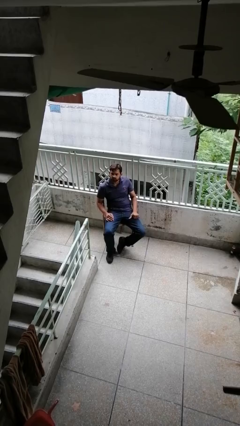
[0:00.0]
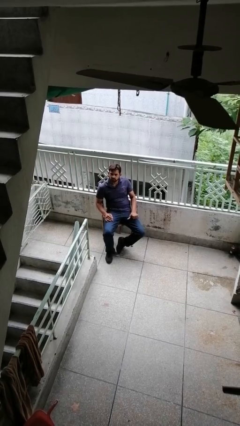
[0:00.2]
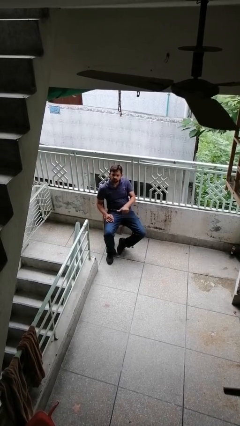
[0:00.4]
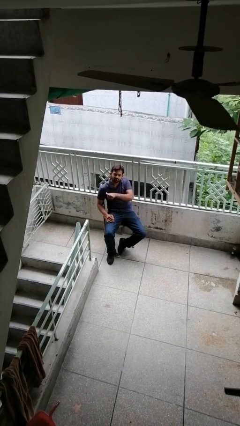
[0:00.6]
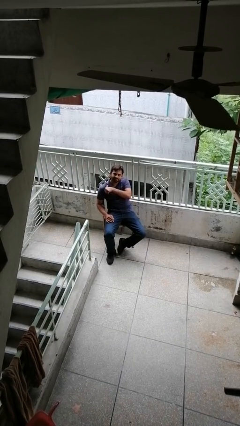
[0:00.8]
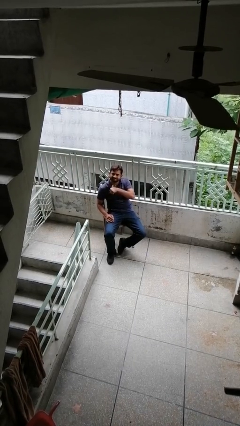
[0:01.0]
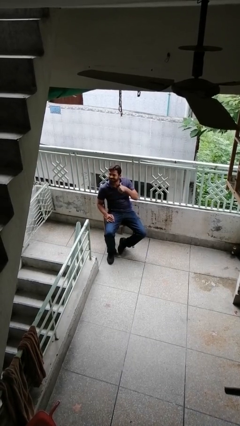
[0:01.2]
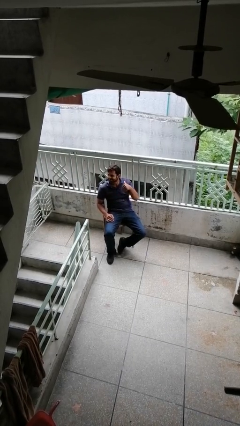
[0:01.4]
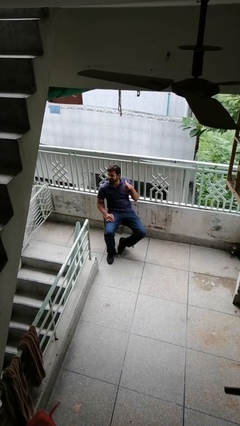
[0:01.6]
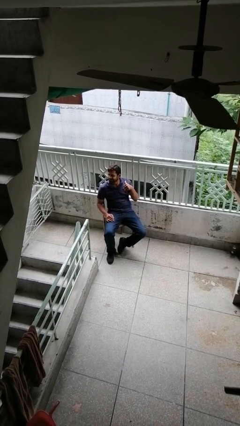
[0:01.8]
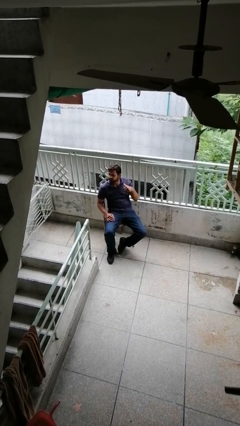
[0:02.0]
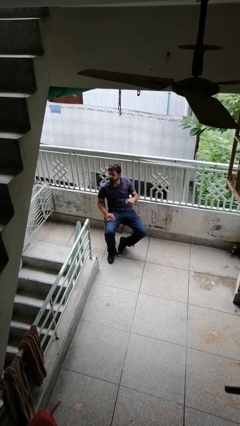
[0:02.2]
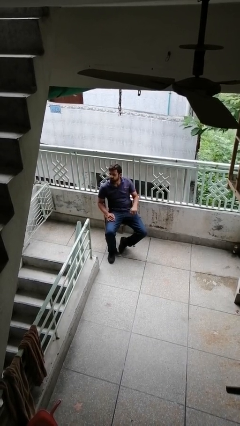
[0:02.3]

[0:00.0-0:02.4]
person gestures cut

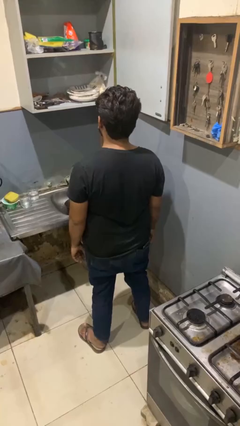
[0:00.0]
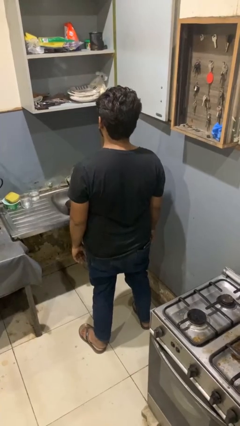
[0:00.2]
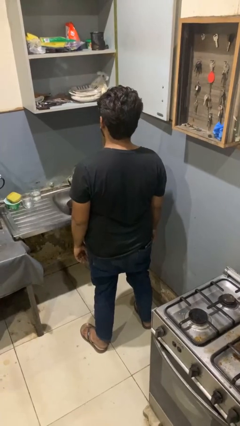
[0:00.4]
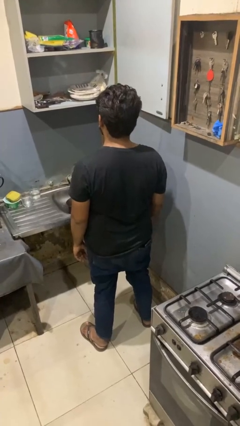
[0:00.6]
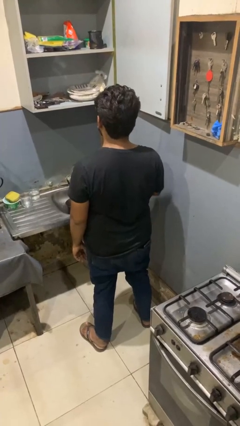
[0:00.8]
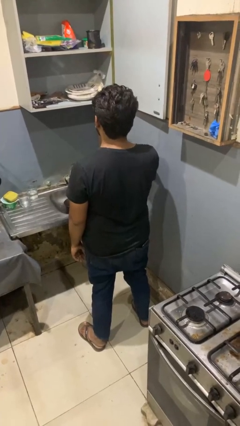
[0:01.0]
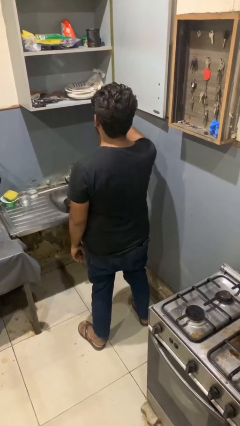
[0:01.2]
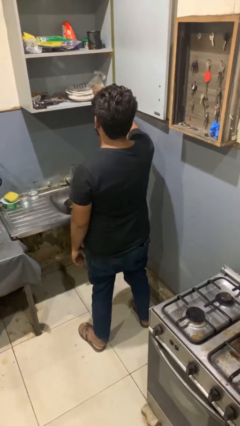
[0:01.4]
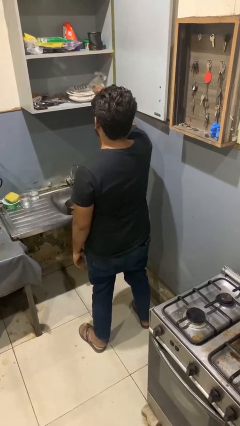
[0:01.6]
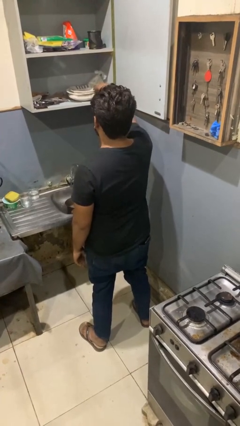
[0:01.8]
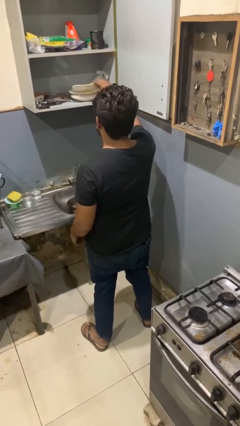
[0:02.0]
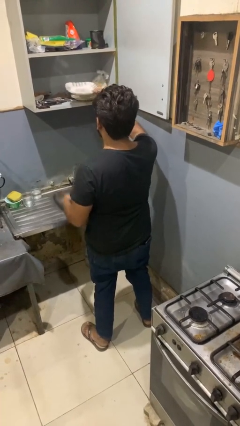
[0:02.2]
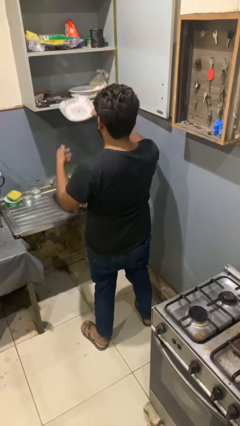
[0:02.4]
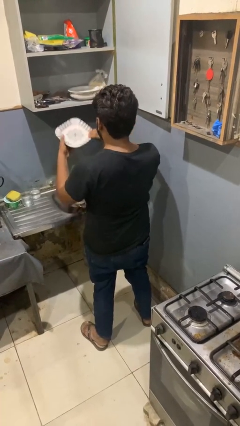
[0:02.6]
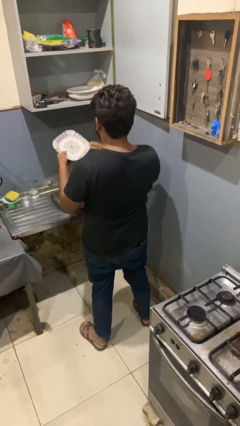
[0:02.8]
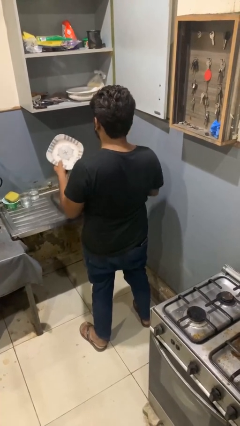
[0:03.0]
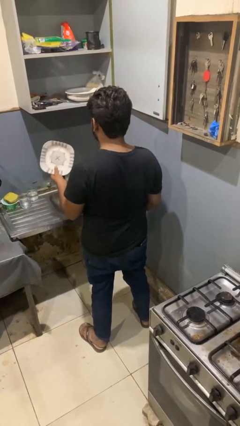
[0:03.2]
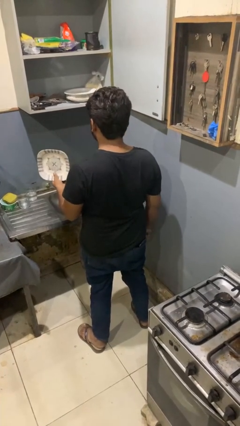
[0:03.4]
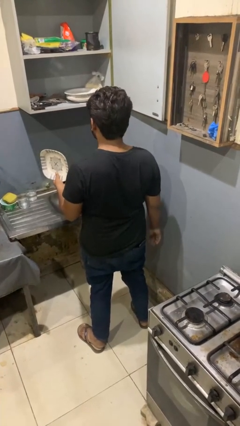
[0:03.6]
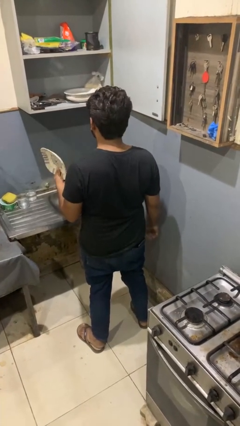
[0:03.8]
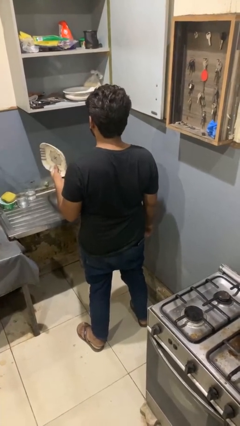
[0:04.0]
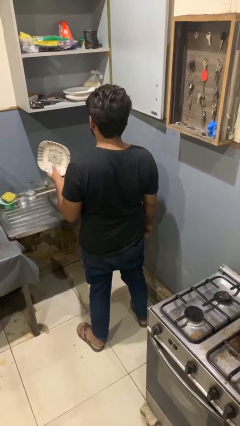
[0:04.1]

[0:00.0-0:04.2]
person takes object from kitchen drawer

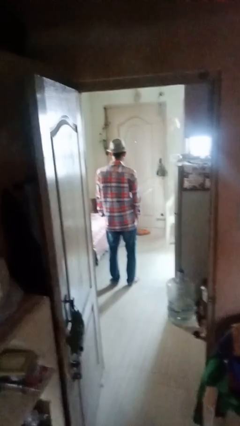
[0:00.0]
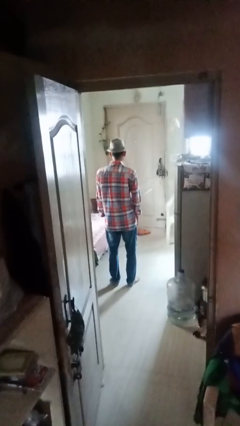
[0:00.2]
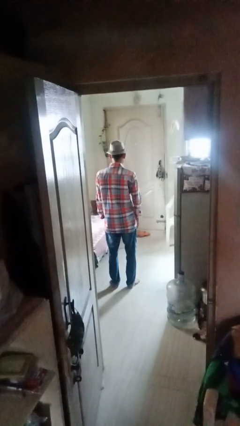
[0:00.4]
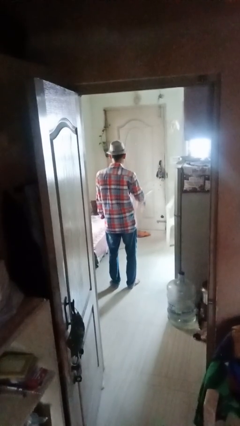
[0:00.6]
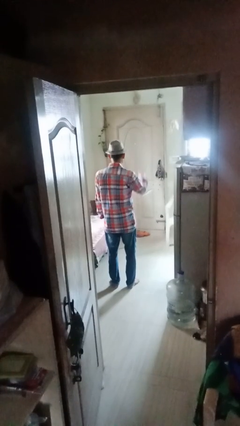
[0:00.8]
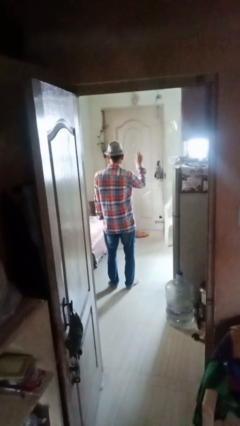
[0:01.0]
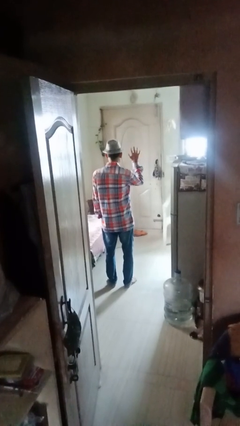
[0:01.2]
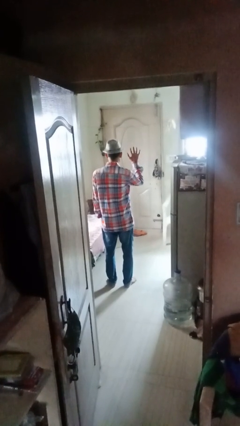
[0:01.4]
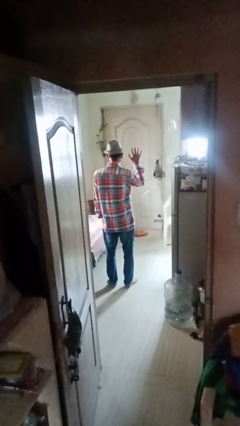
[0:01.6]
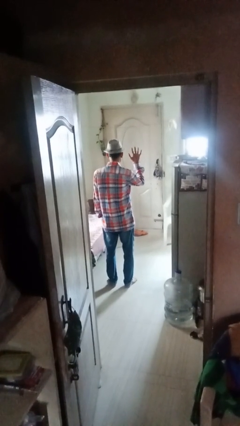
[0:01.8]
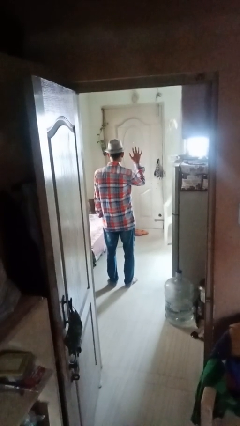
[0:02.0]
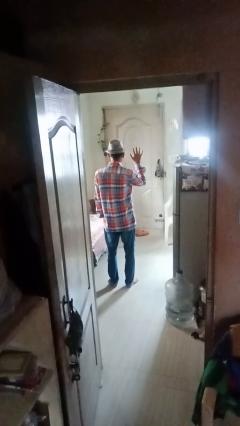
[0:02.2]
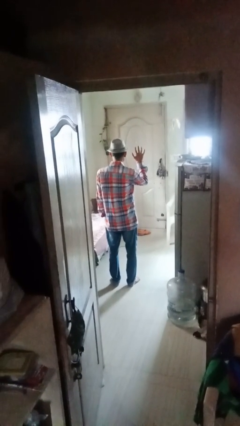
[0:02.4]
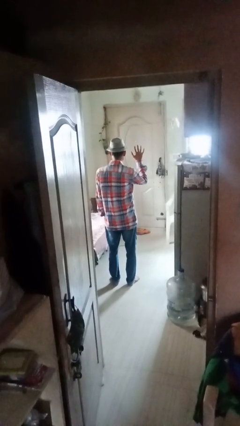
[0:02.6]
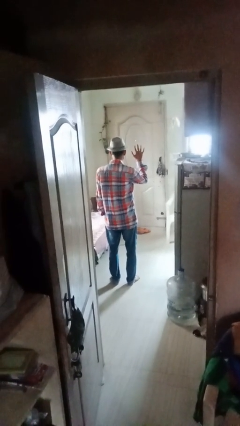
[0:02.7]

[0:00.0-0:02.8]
person gestures number five

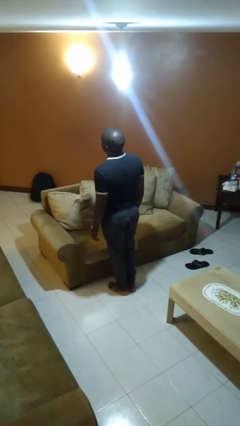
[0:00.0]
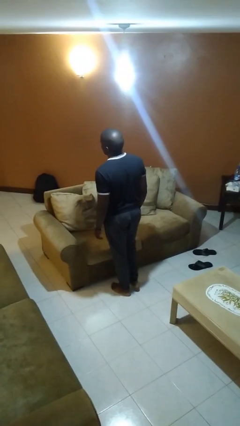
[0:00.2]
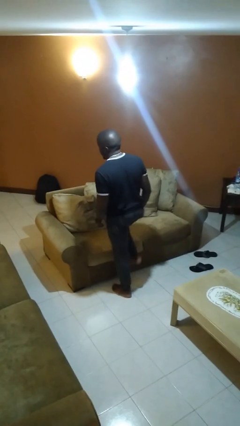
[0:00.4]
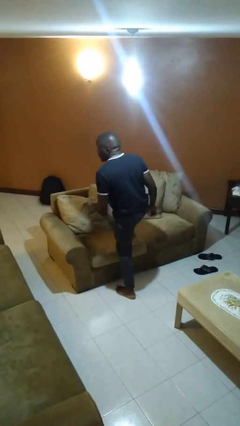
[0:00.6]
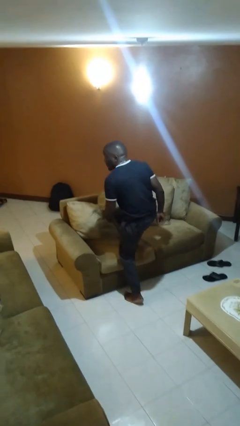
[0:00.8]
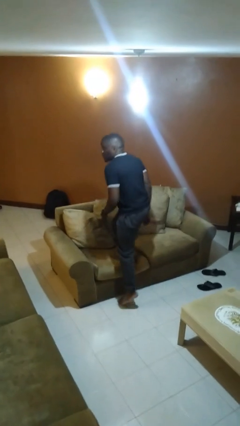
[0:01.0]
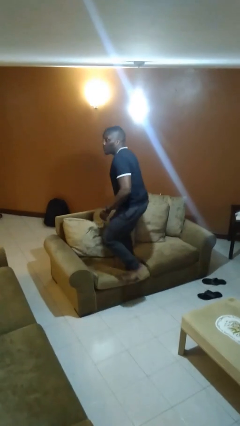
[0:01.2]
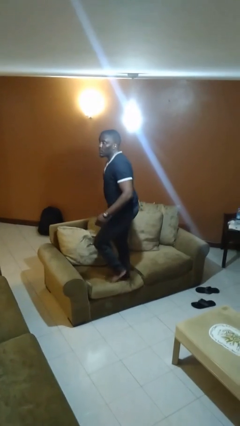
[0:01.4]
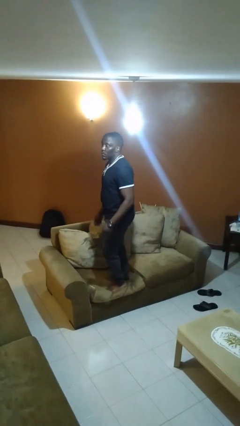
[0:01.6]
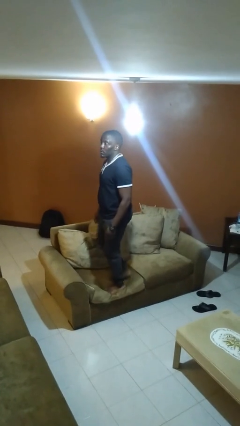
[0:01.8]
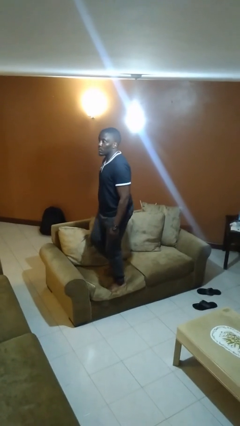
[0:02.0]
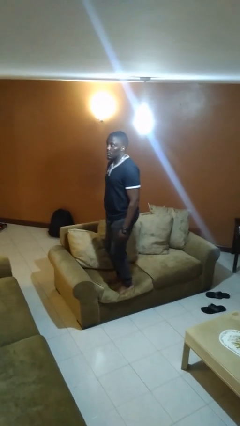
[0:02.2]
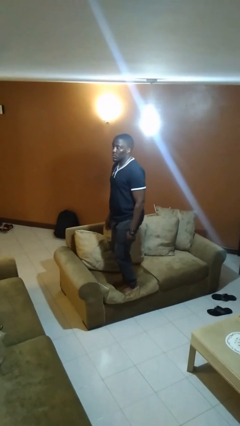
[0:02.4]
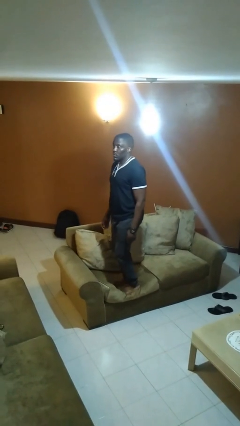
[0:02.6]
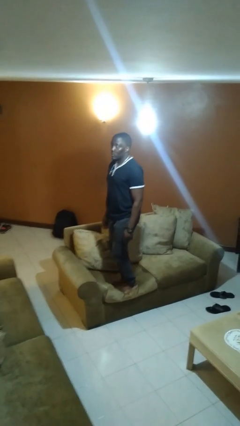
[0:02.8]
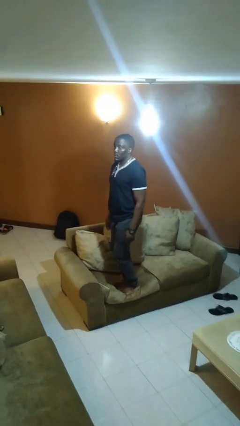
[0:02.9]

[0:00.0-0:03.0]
person climbs on couch

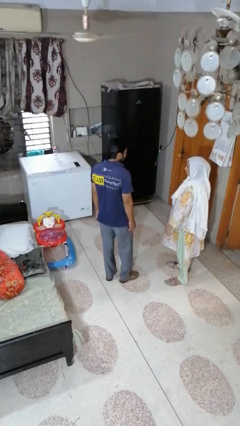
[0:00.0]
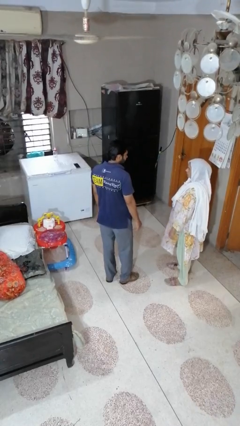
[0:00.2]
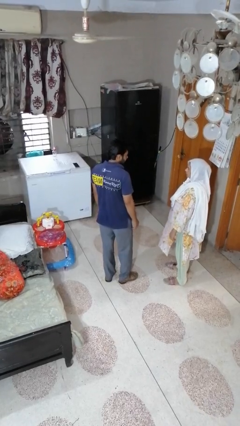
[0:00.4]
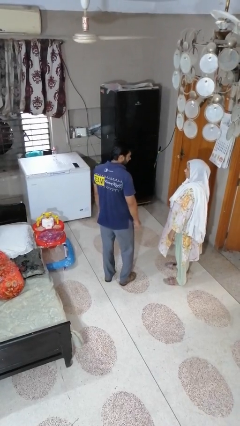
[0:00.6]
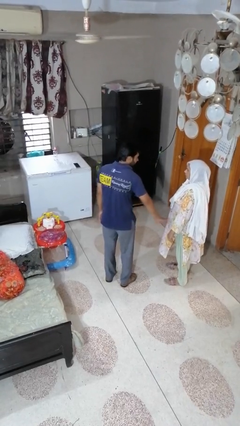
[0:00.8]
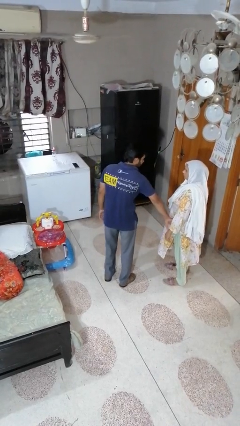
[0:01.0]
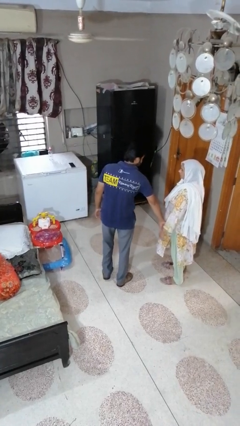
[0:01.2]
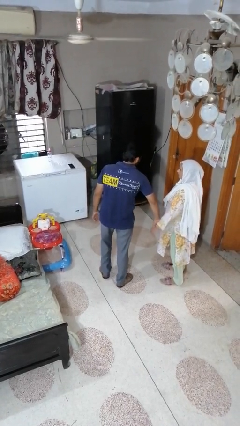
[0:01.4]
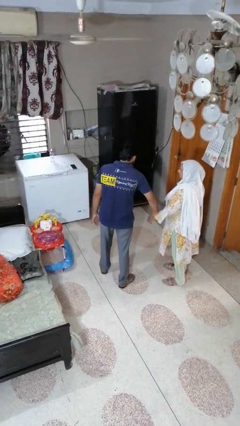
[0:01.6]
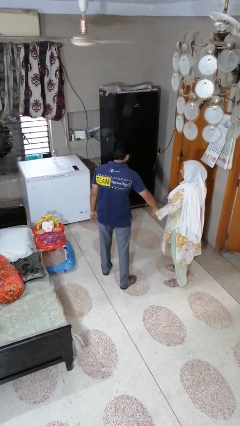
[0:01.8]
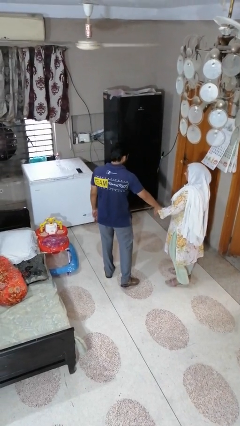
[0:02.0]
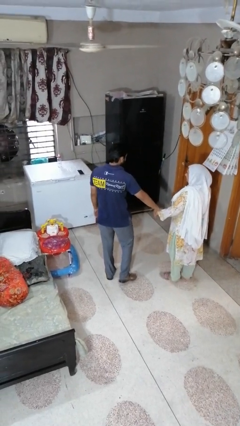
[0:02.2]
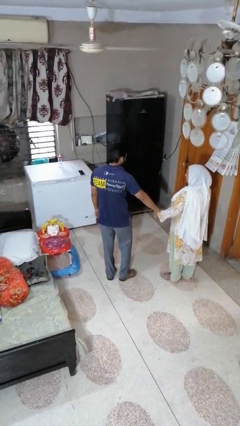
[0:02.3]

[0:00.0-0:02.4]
person grabs person by forearm

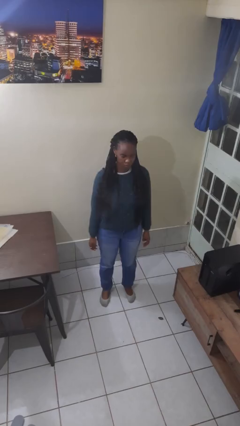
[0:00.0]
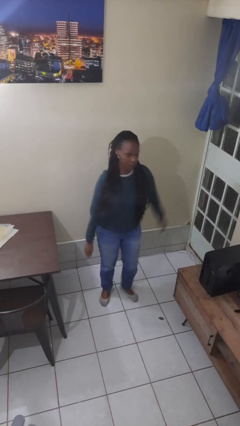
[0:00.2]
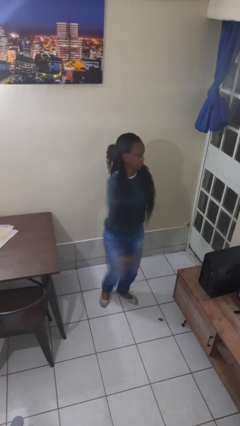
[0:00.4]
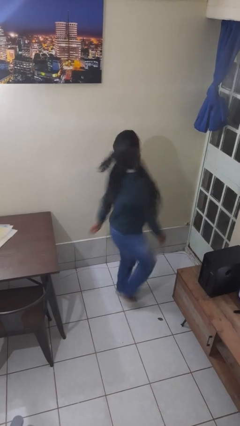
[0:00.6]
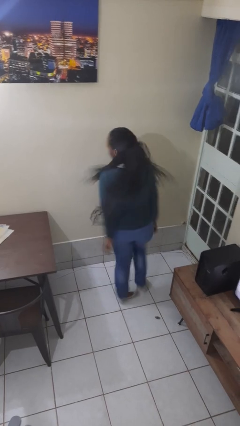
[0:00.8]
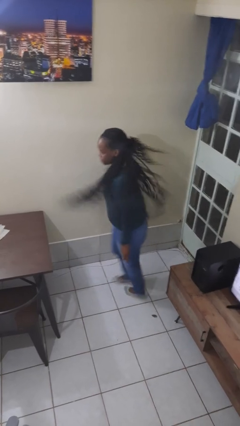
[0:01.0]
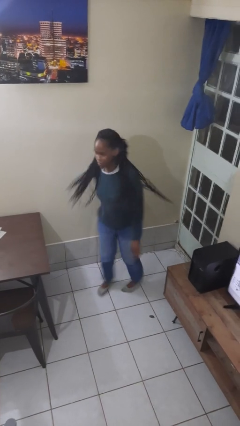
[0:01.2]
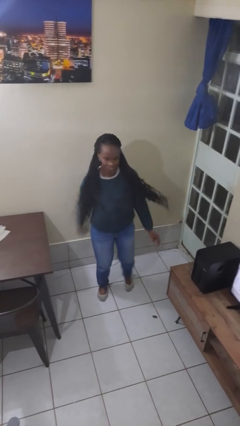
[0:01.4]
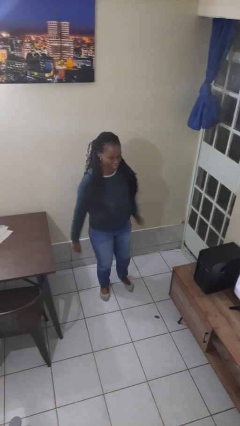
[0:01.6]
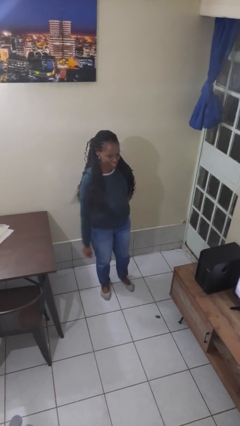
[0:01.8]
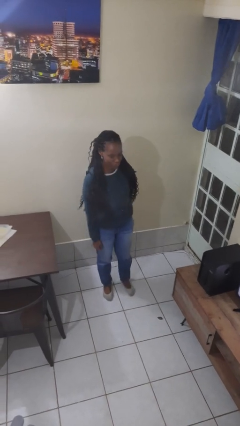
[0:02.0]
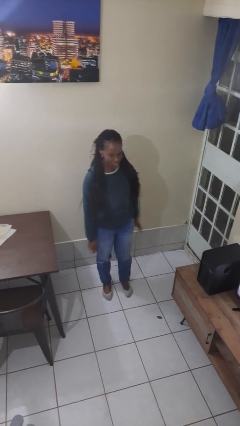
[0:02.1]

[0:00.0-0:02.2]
person twirls
